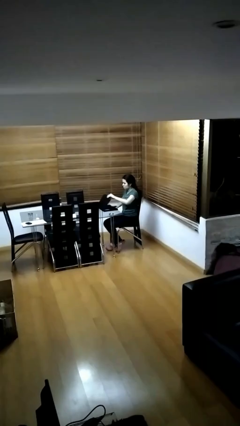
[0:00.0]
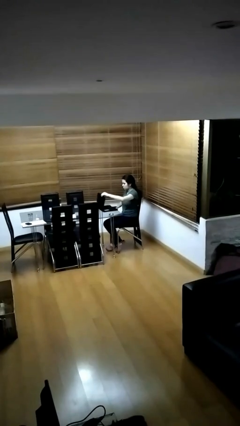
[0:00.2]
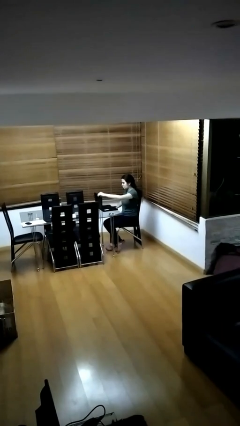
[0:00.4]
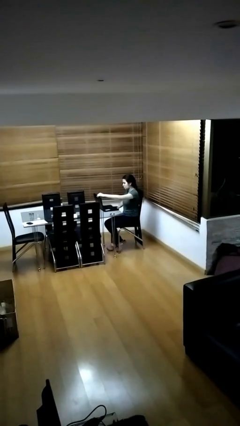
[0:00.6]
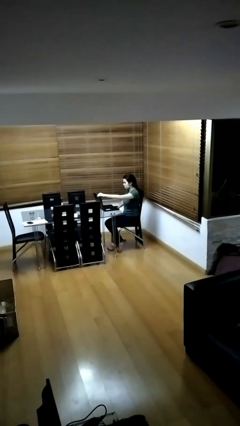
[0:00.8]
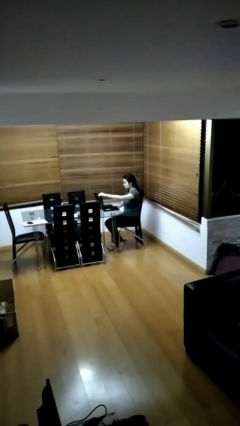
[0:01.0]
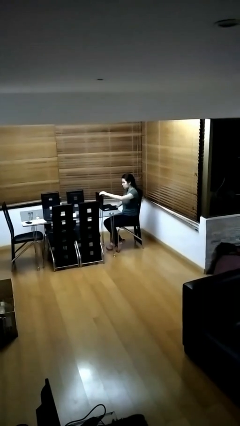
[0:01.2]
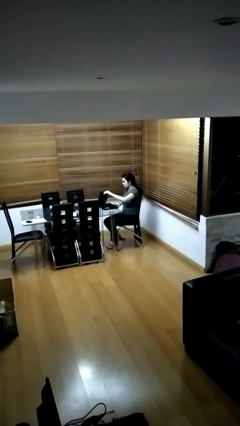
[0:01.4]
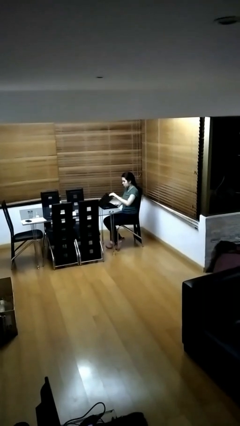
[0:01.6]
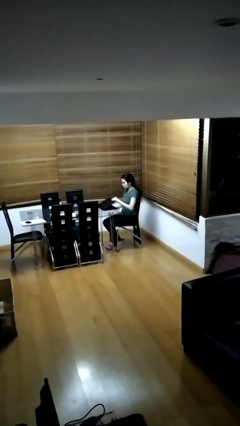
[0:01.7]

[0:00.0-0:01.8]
person interacts with laptop

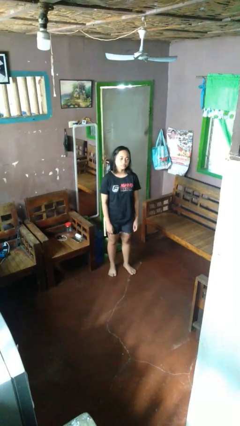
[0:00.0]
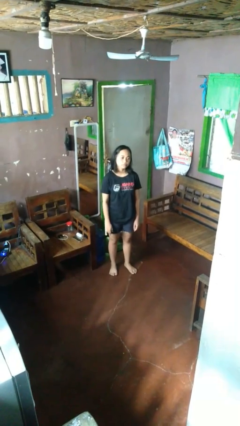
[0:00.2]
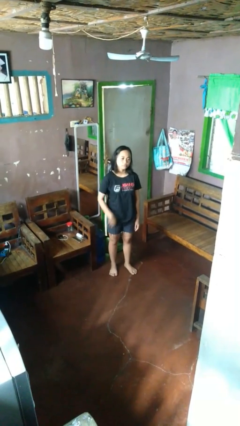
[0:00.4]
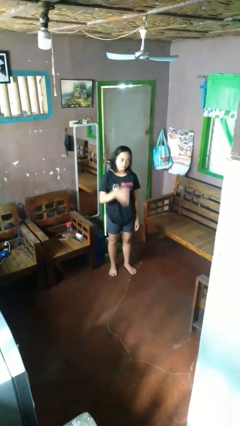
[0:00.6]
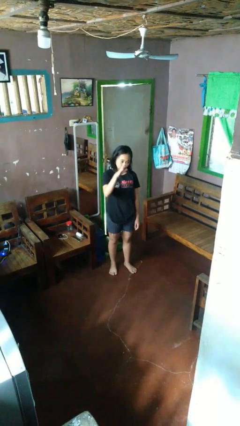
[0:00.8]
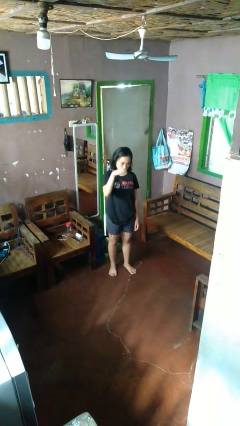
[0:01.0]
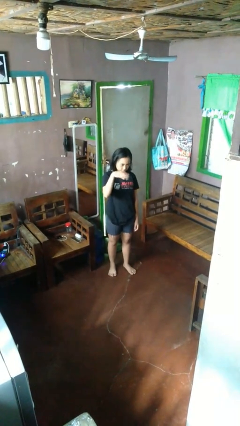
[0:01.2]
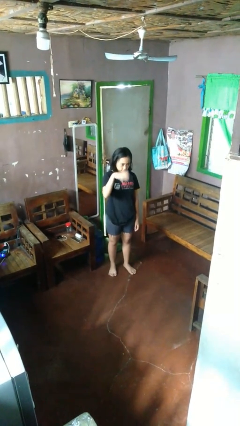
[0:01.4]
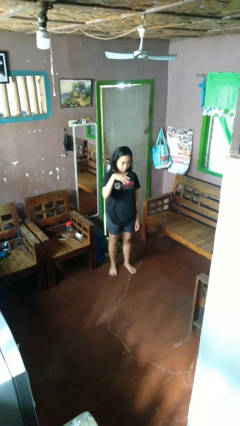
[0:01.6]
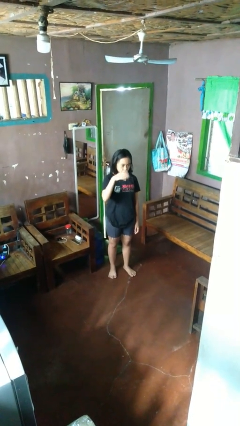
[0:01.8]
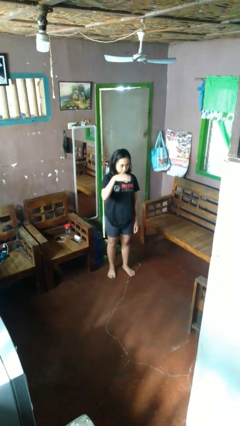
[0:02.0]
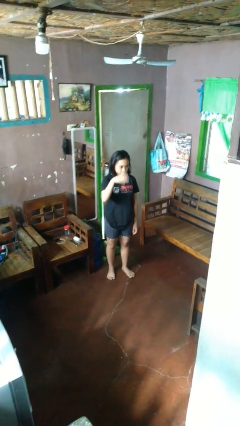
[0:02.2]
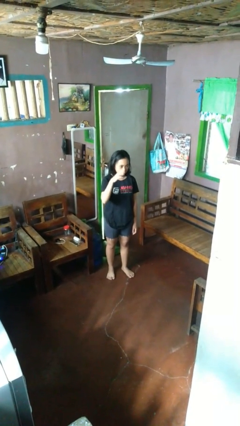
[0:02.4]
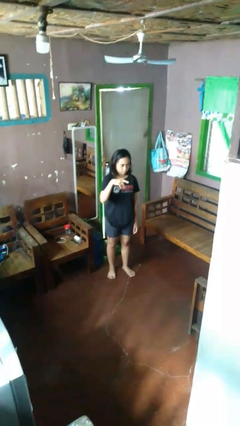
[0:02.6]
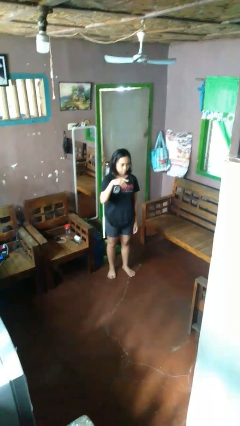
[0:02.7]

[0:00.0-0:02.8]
person gestures come here

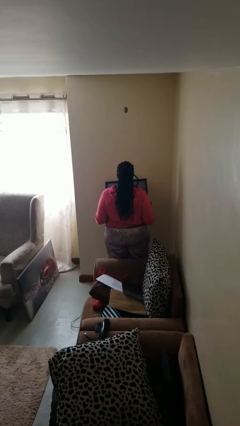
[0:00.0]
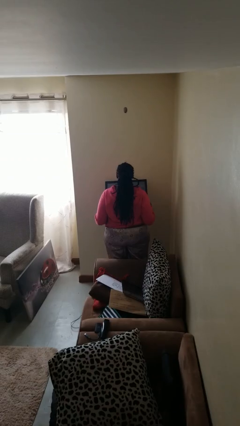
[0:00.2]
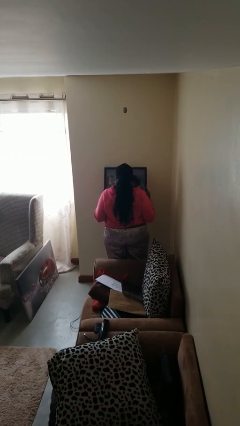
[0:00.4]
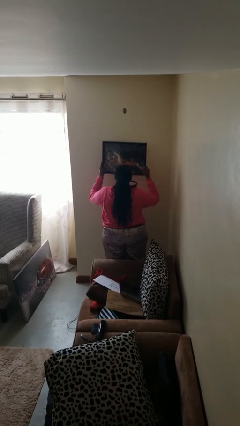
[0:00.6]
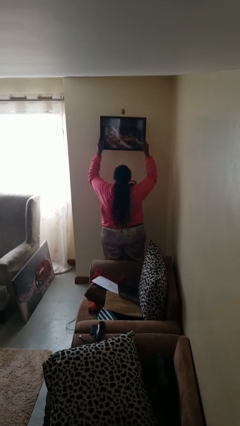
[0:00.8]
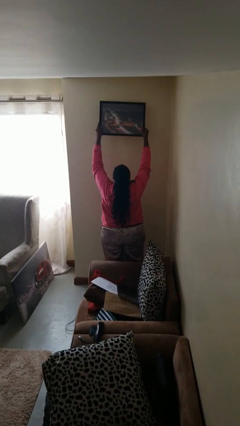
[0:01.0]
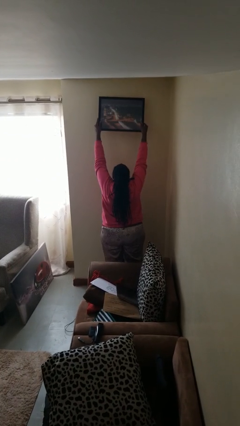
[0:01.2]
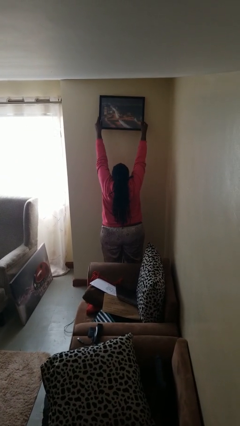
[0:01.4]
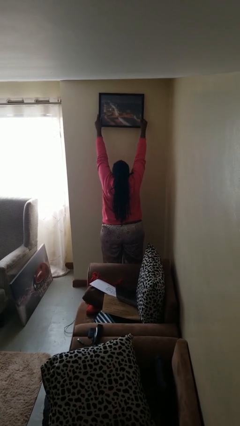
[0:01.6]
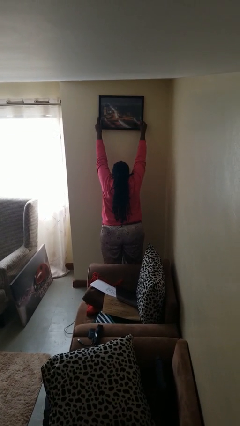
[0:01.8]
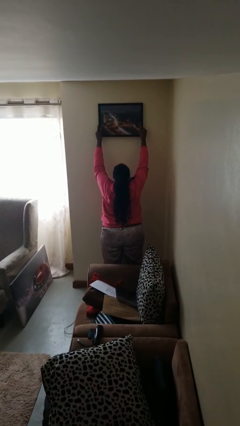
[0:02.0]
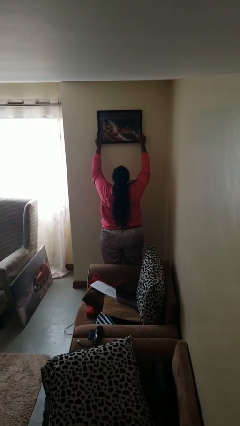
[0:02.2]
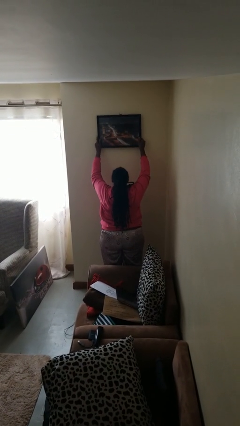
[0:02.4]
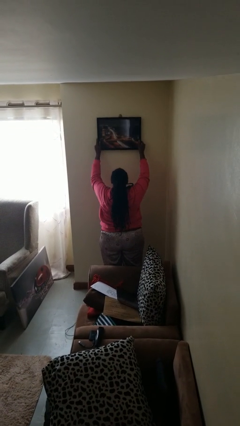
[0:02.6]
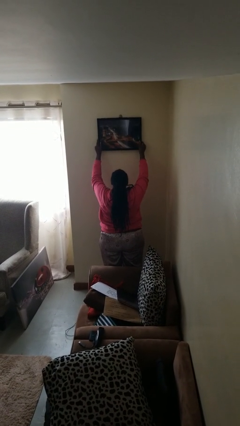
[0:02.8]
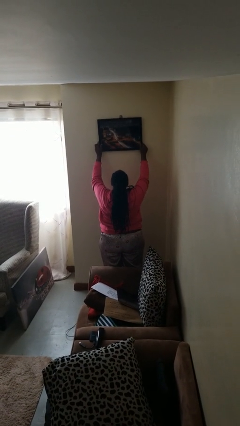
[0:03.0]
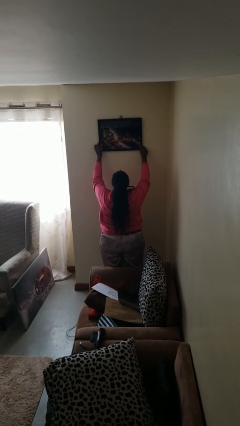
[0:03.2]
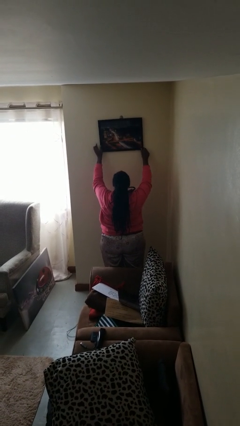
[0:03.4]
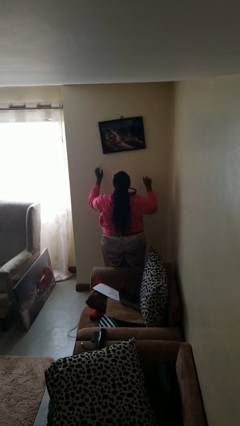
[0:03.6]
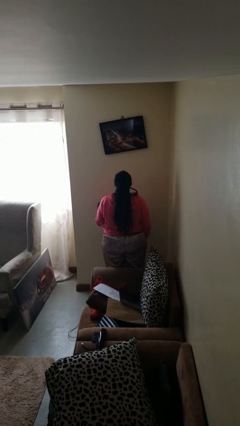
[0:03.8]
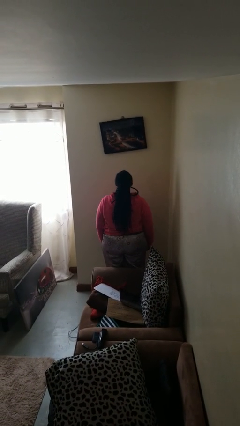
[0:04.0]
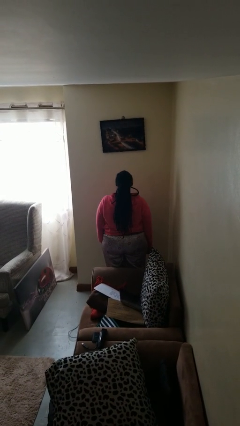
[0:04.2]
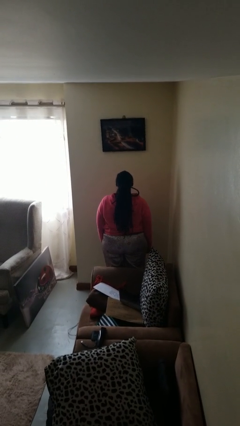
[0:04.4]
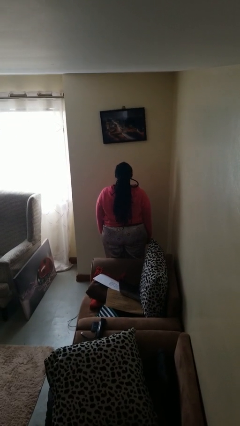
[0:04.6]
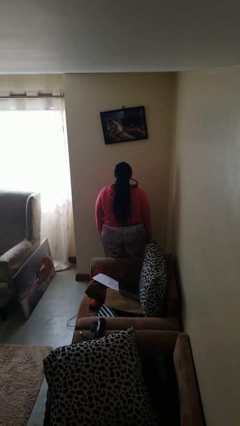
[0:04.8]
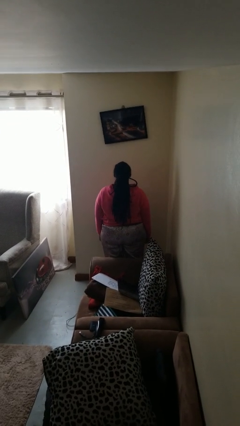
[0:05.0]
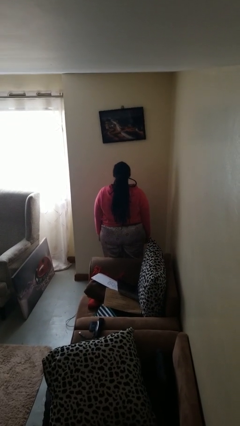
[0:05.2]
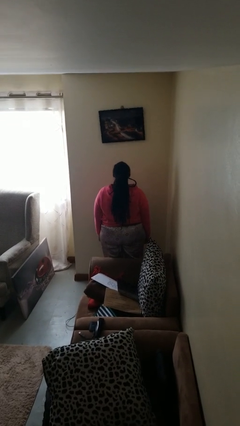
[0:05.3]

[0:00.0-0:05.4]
person puts up picture frame

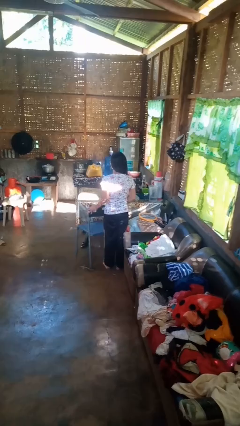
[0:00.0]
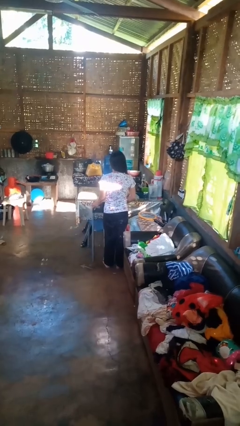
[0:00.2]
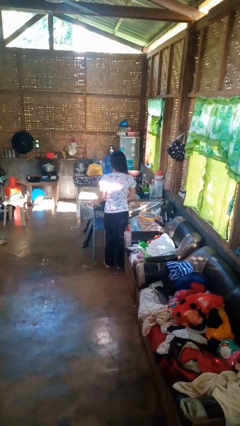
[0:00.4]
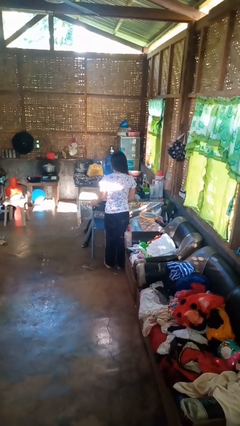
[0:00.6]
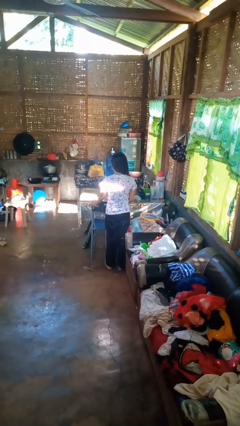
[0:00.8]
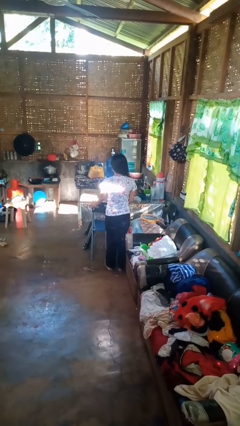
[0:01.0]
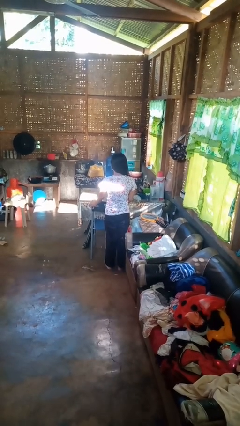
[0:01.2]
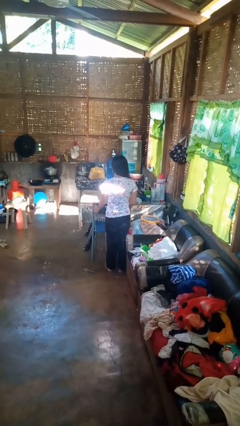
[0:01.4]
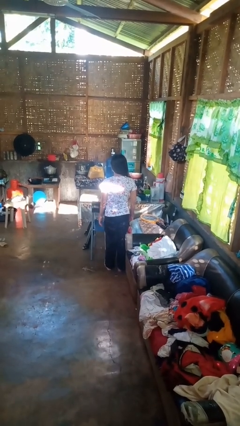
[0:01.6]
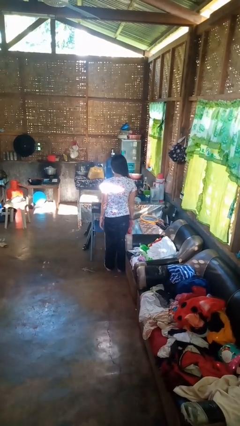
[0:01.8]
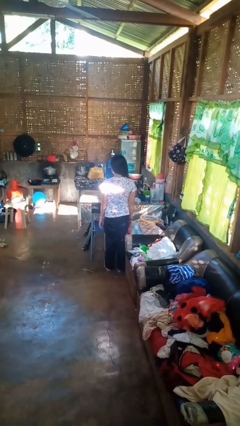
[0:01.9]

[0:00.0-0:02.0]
person pushes in chair

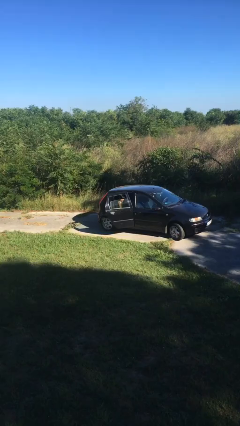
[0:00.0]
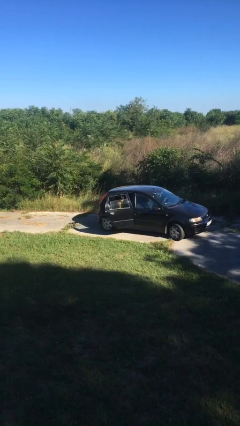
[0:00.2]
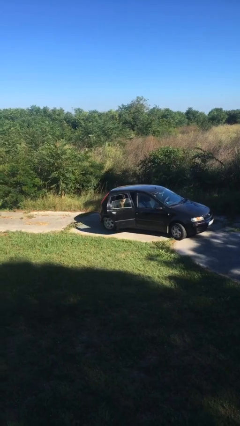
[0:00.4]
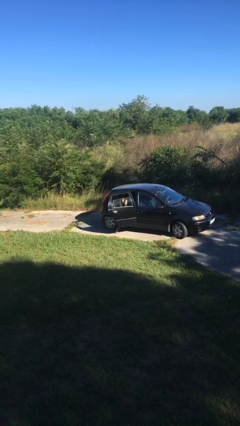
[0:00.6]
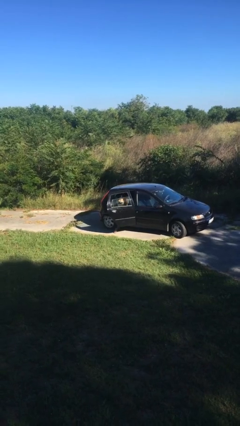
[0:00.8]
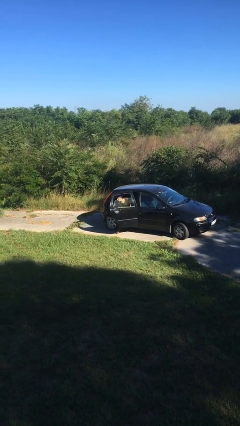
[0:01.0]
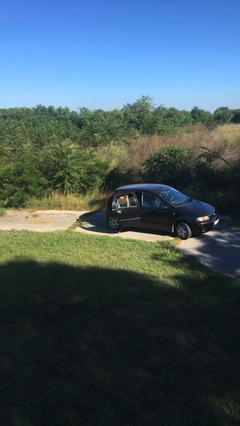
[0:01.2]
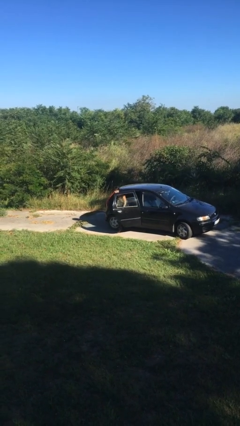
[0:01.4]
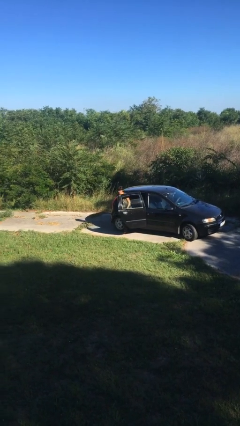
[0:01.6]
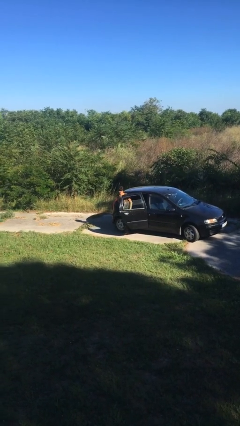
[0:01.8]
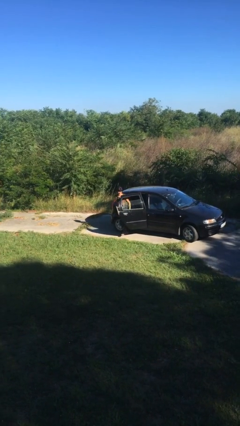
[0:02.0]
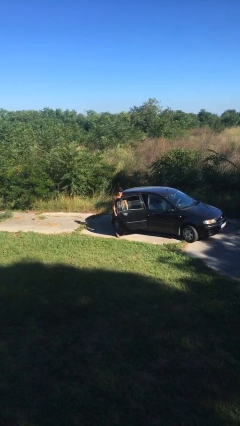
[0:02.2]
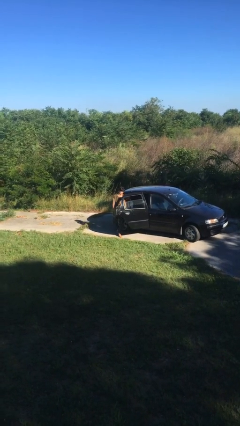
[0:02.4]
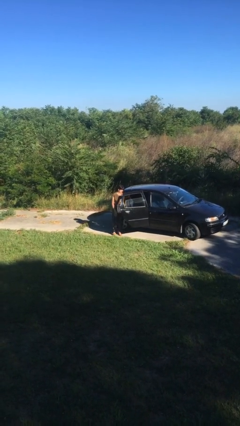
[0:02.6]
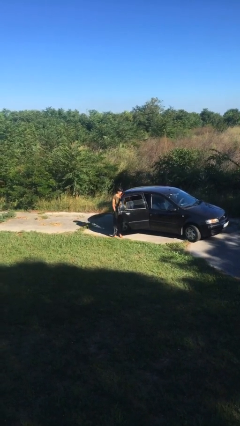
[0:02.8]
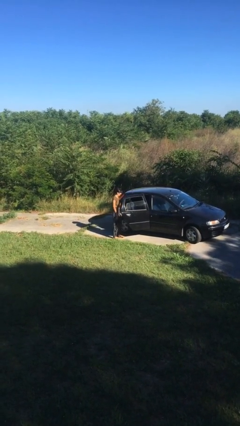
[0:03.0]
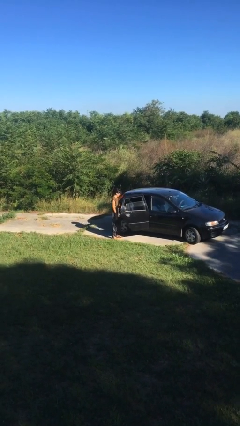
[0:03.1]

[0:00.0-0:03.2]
person exits car

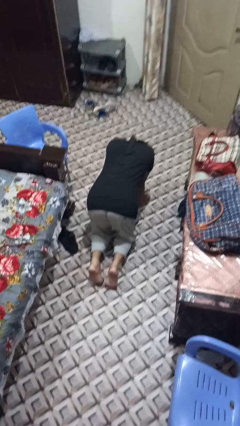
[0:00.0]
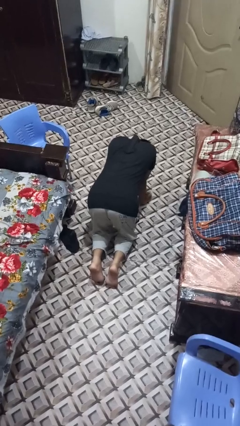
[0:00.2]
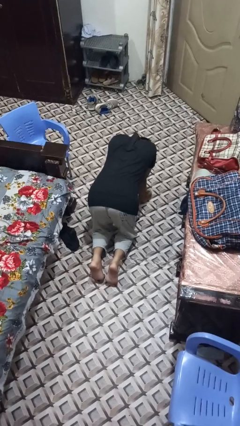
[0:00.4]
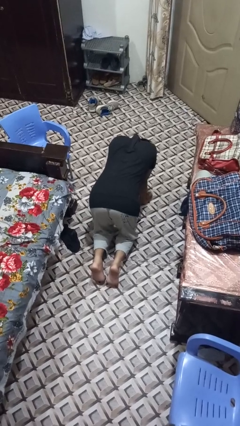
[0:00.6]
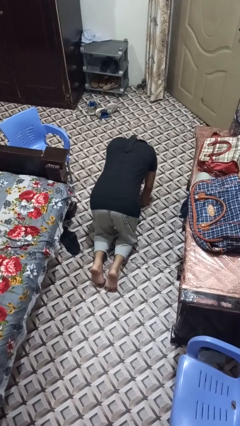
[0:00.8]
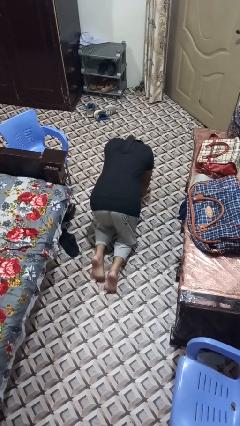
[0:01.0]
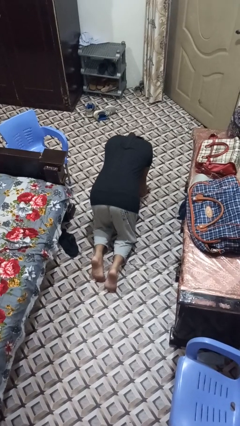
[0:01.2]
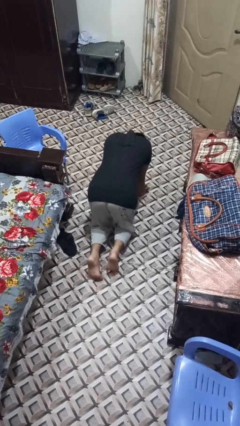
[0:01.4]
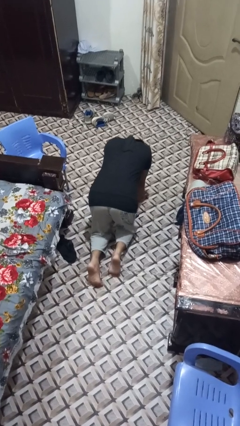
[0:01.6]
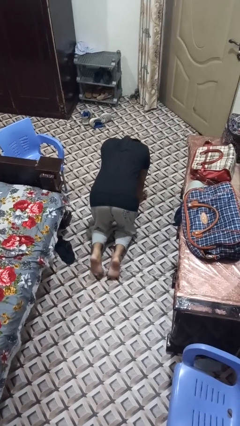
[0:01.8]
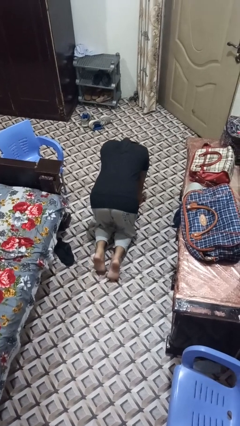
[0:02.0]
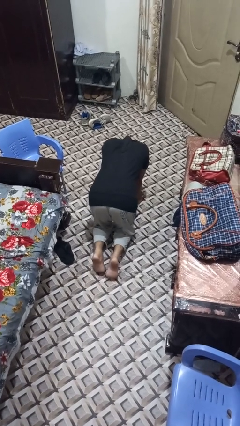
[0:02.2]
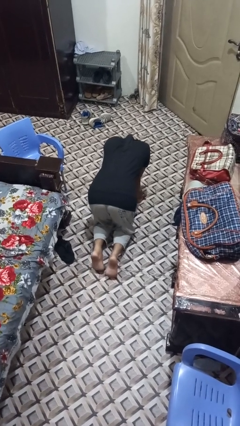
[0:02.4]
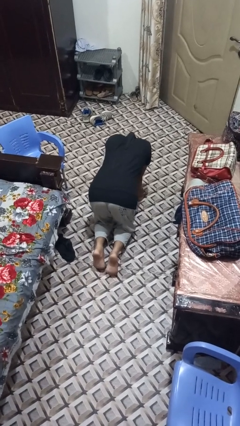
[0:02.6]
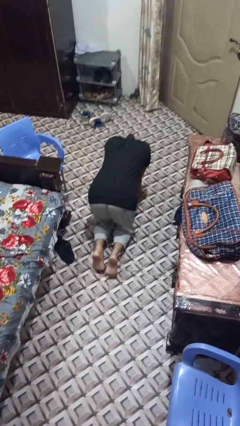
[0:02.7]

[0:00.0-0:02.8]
person crawls
